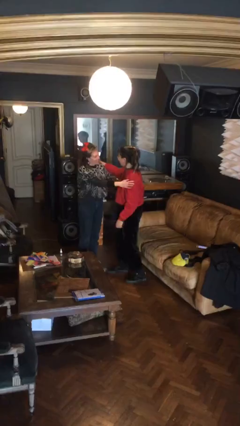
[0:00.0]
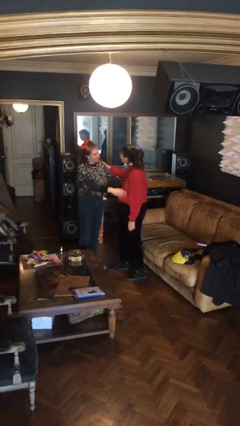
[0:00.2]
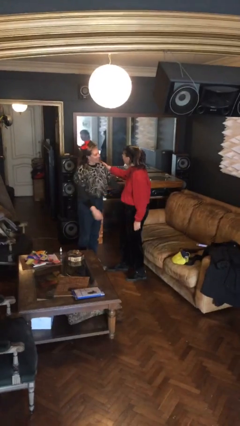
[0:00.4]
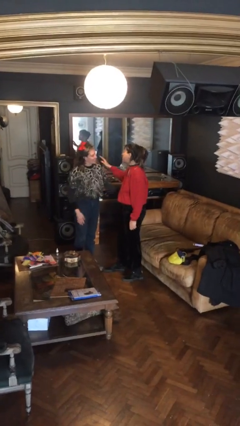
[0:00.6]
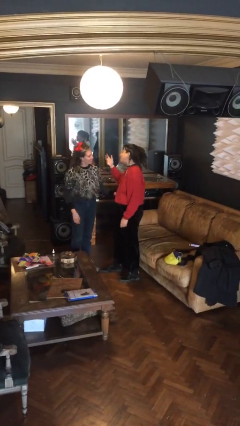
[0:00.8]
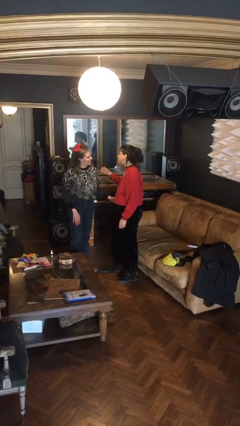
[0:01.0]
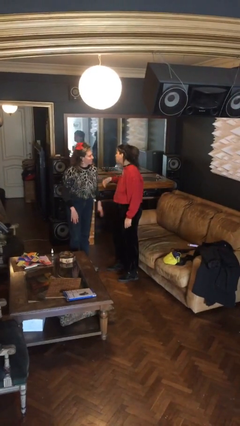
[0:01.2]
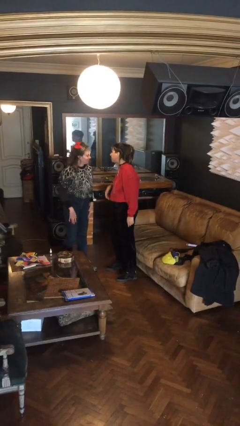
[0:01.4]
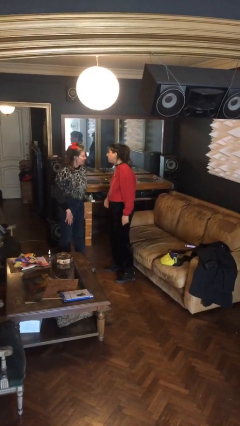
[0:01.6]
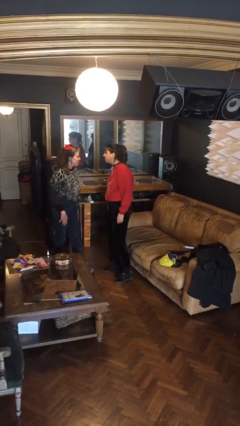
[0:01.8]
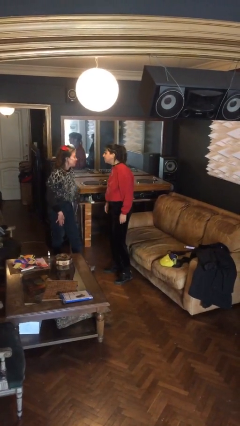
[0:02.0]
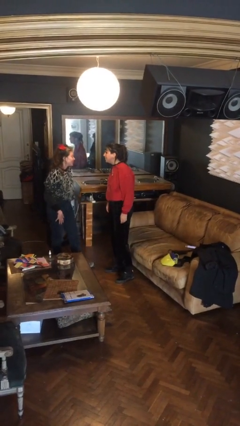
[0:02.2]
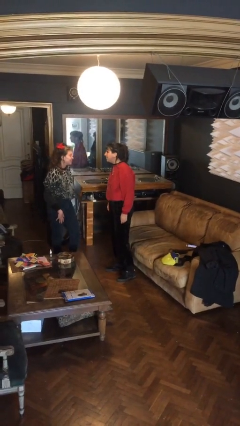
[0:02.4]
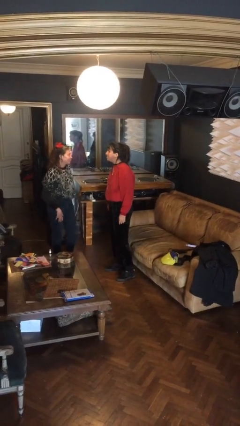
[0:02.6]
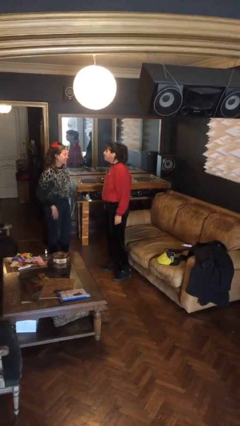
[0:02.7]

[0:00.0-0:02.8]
person talks to person

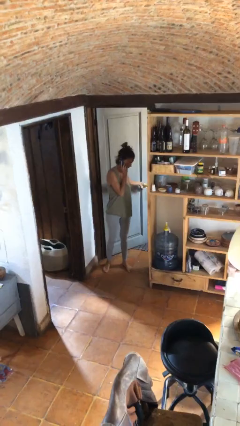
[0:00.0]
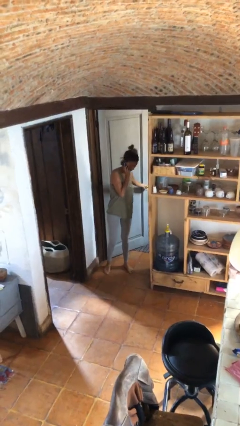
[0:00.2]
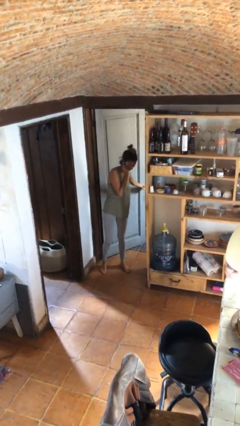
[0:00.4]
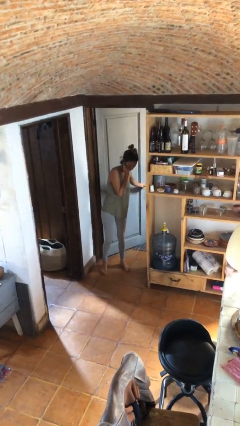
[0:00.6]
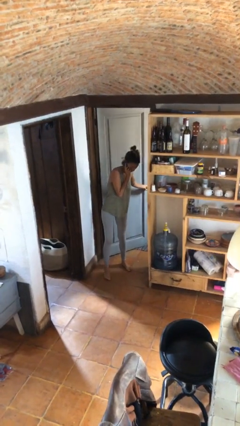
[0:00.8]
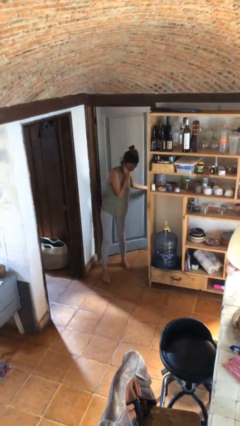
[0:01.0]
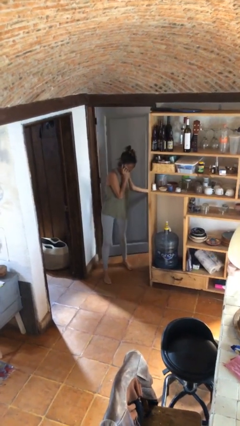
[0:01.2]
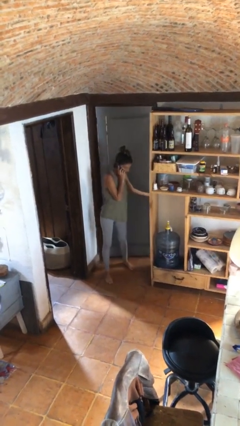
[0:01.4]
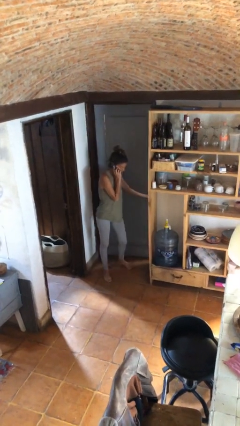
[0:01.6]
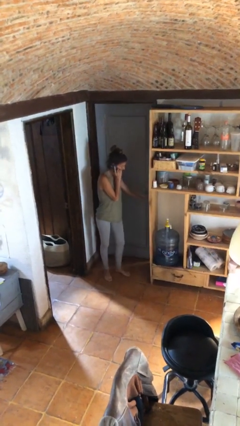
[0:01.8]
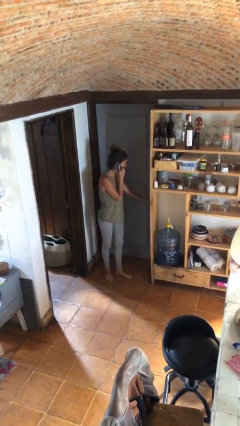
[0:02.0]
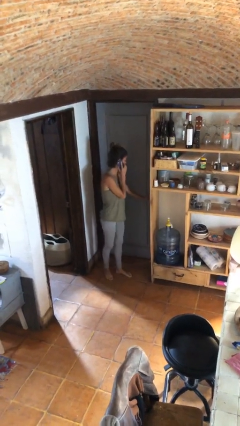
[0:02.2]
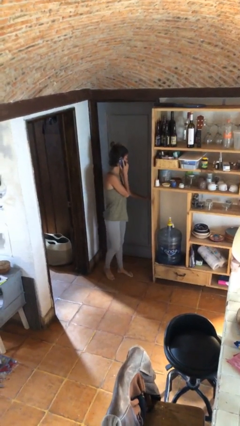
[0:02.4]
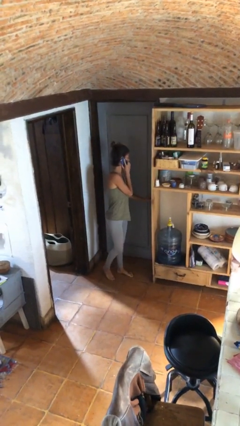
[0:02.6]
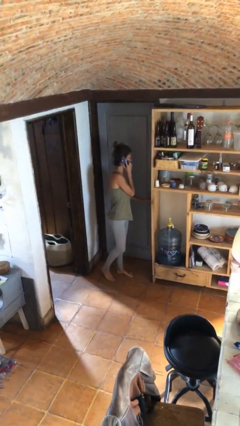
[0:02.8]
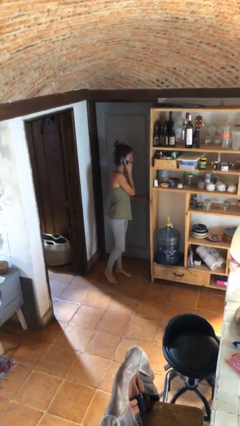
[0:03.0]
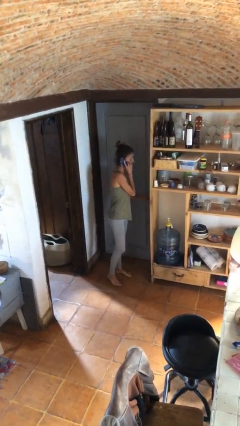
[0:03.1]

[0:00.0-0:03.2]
person closes facility door

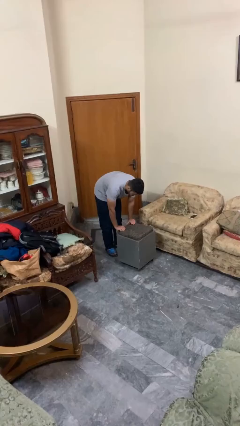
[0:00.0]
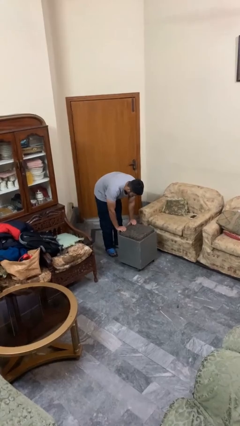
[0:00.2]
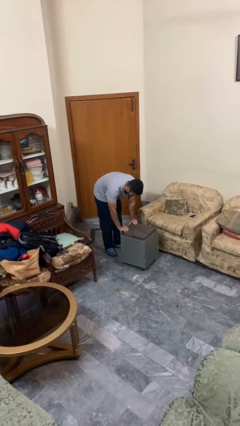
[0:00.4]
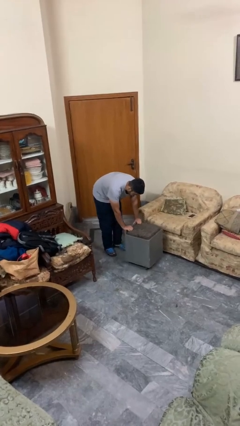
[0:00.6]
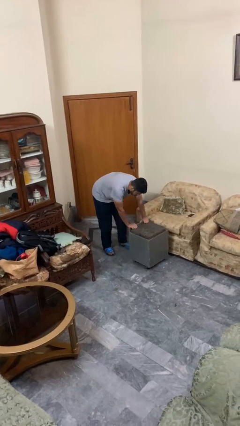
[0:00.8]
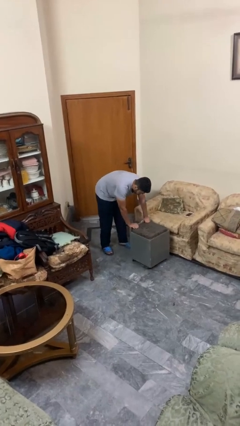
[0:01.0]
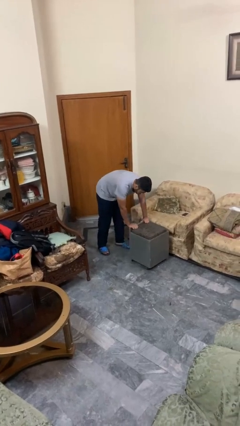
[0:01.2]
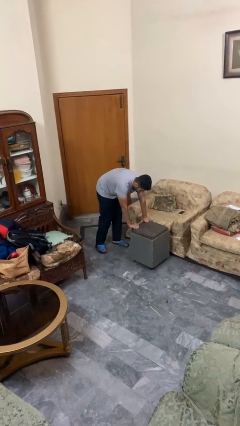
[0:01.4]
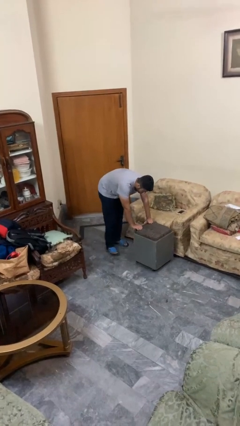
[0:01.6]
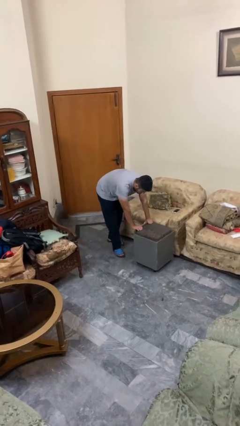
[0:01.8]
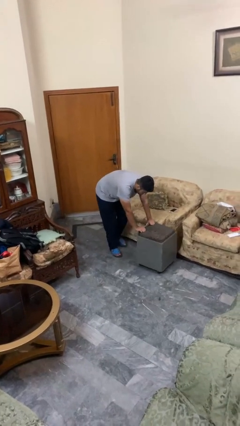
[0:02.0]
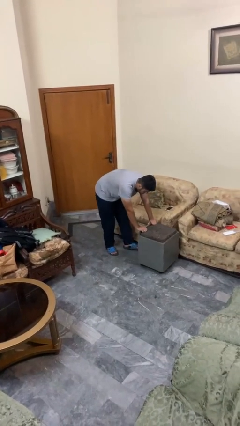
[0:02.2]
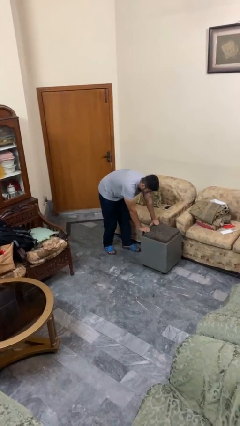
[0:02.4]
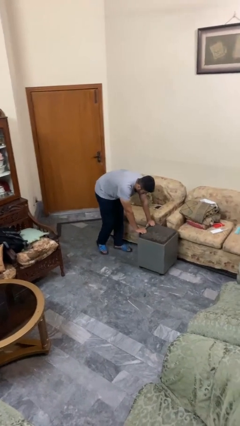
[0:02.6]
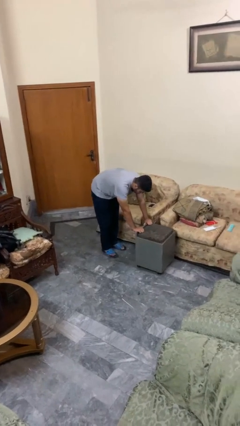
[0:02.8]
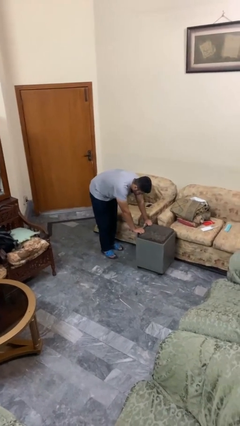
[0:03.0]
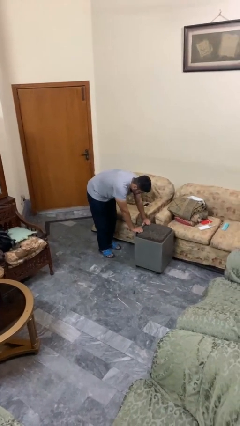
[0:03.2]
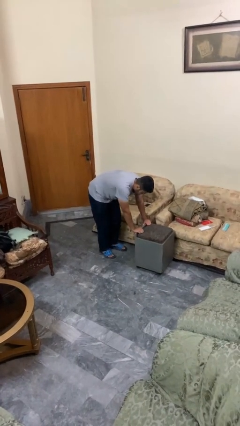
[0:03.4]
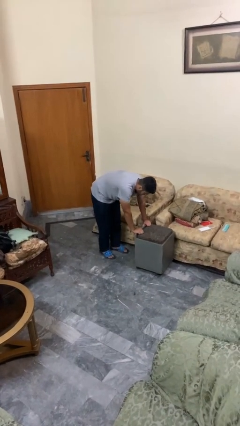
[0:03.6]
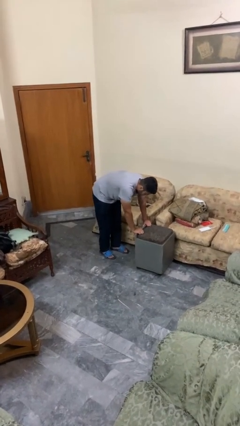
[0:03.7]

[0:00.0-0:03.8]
person pushes wheeled cart

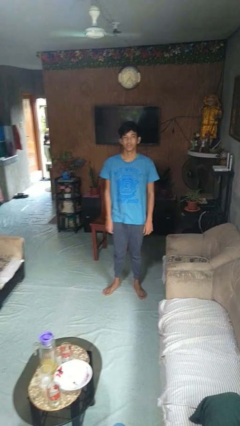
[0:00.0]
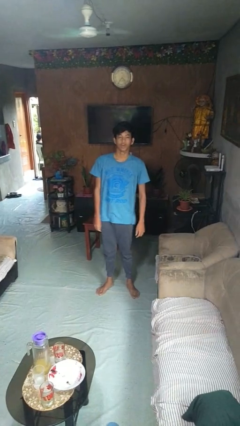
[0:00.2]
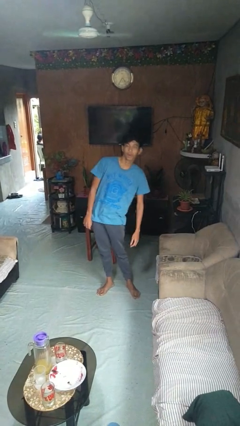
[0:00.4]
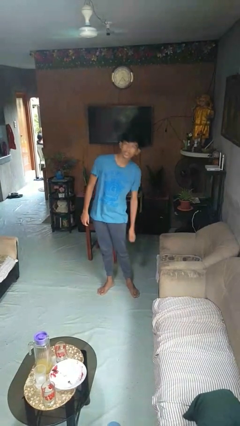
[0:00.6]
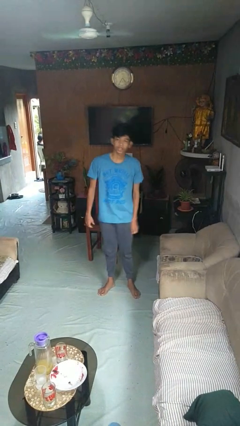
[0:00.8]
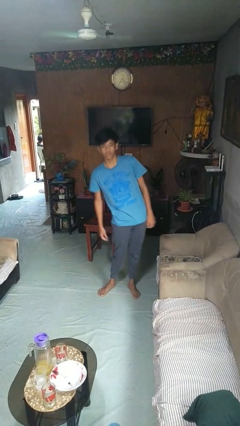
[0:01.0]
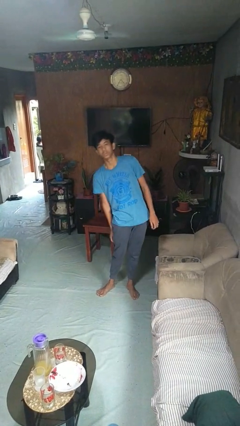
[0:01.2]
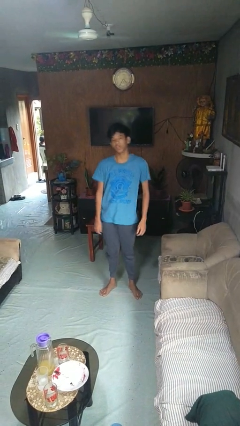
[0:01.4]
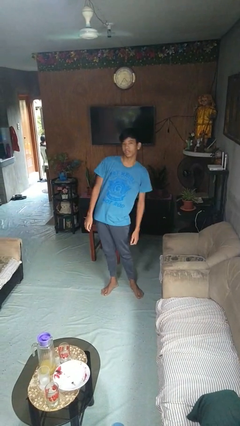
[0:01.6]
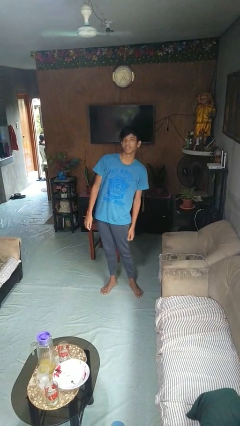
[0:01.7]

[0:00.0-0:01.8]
person dances in place

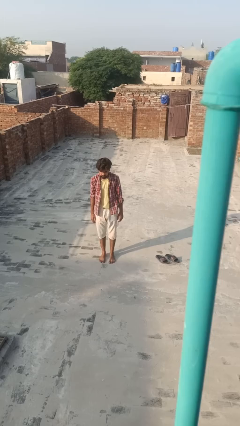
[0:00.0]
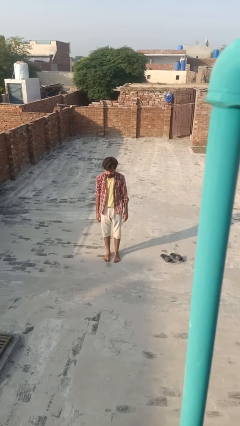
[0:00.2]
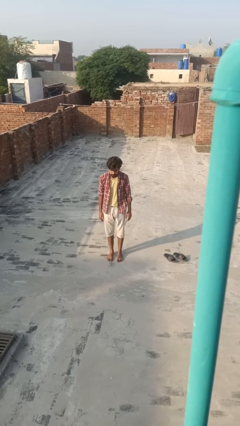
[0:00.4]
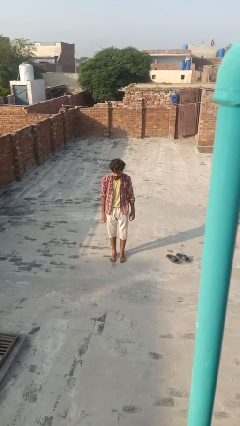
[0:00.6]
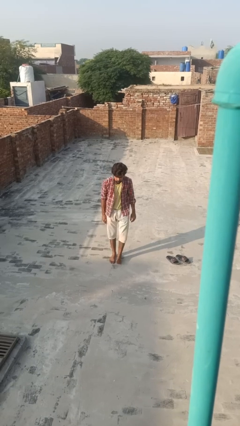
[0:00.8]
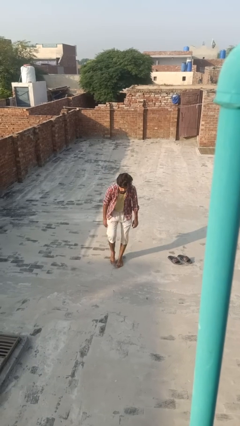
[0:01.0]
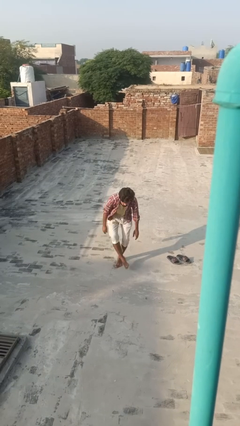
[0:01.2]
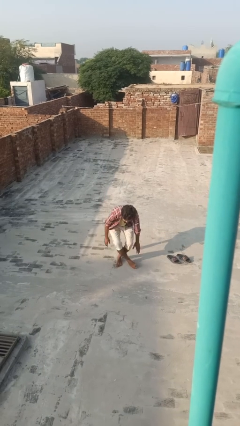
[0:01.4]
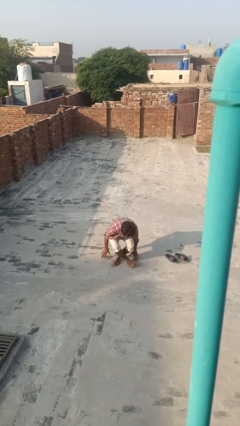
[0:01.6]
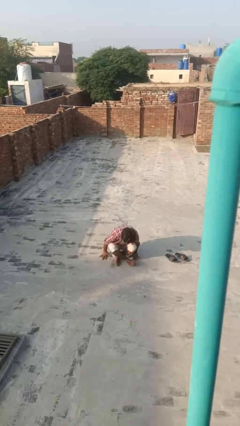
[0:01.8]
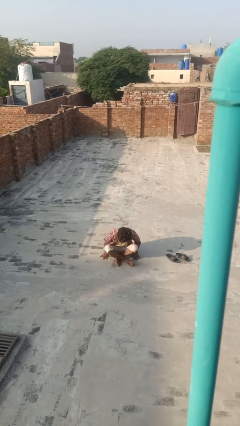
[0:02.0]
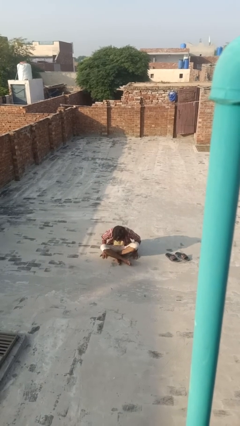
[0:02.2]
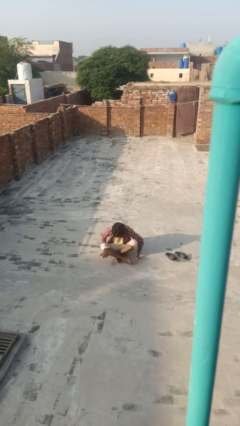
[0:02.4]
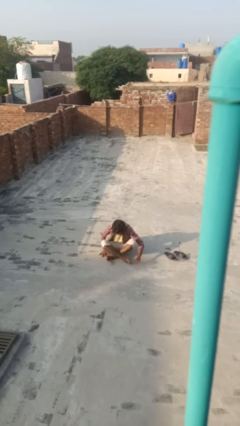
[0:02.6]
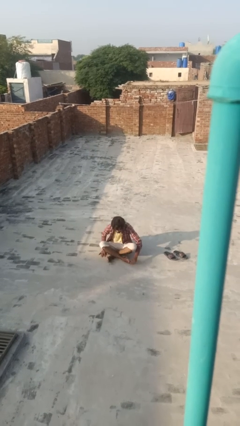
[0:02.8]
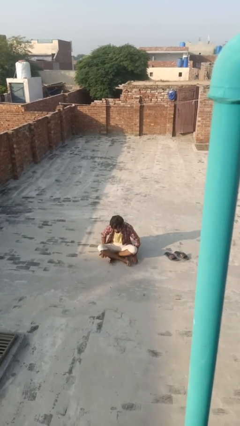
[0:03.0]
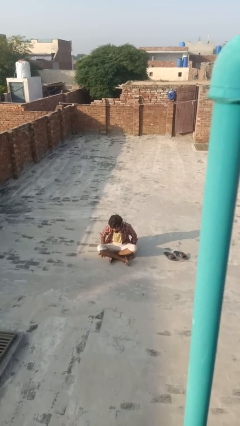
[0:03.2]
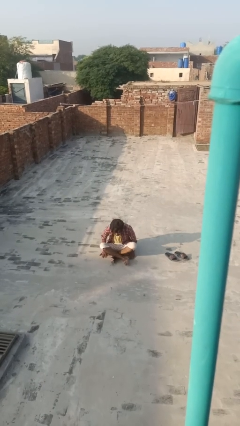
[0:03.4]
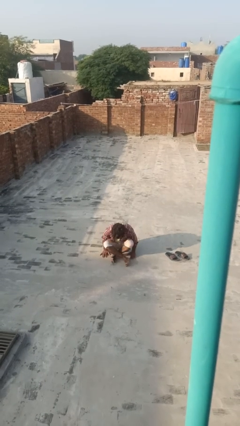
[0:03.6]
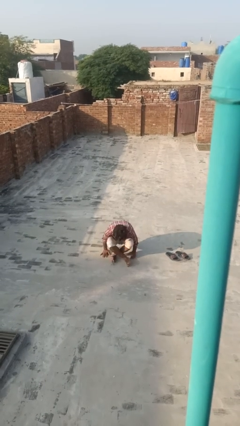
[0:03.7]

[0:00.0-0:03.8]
person sits crisscross

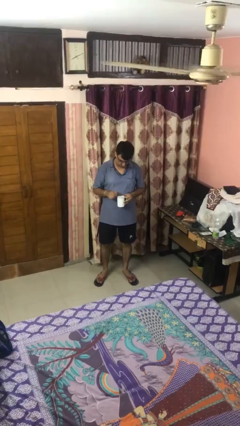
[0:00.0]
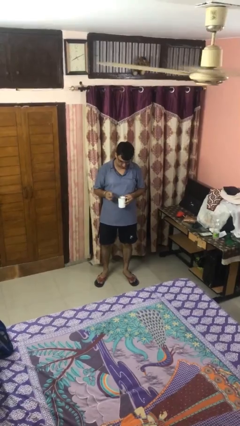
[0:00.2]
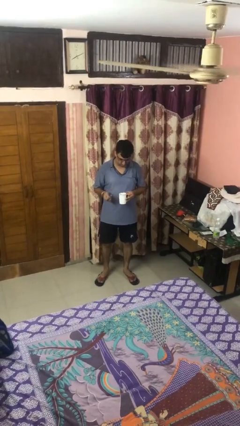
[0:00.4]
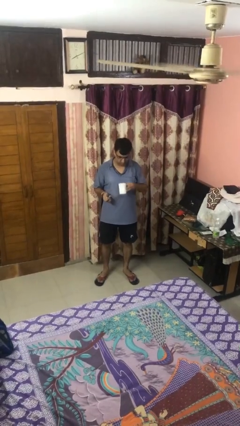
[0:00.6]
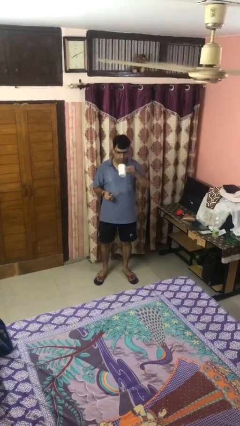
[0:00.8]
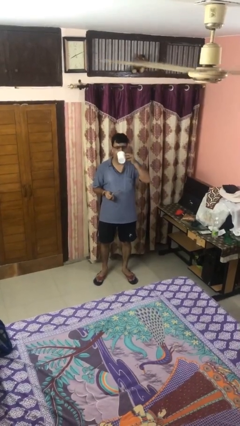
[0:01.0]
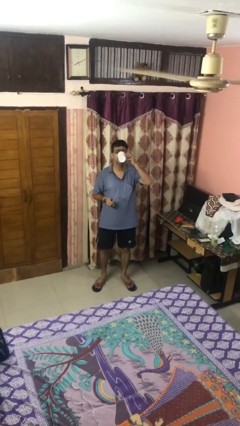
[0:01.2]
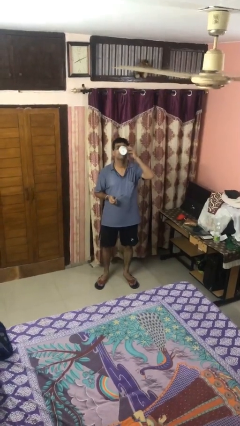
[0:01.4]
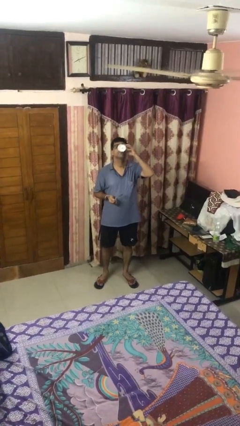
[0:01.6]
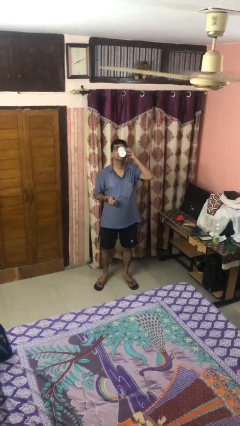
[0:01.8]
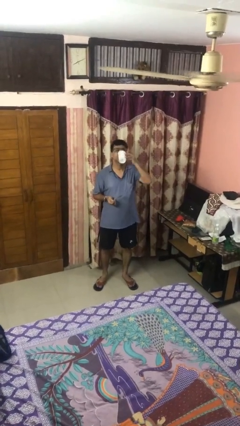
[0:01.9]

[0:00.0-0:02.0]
person drinks from mug
